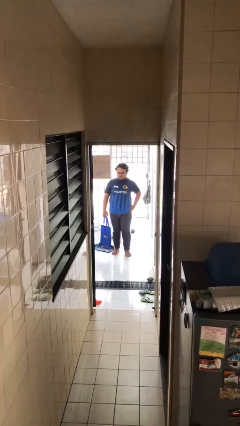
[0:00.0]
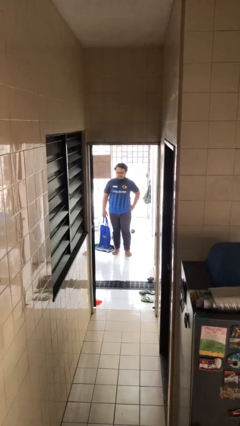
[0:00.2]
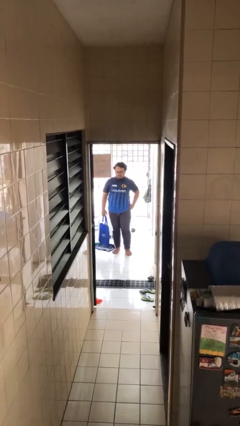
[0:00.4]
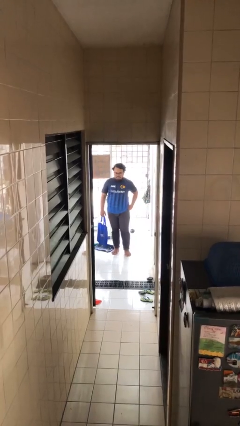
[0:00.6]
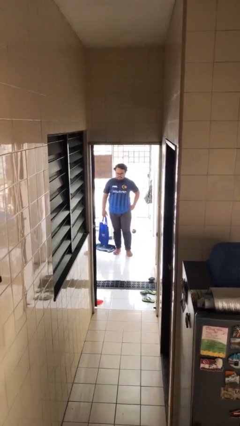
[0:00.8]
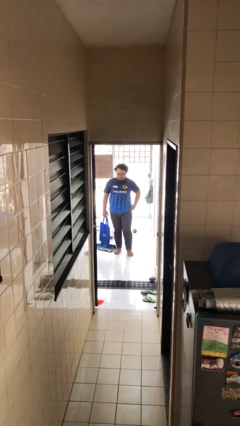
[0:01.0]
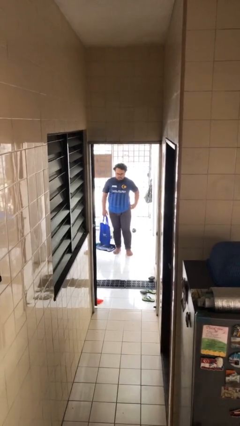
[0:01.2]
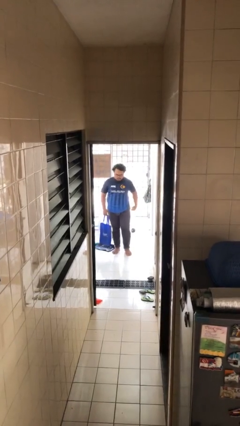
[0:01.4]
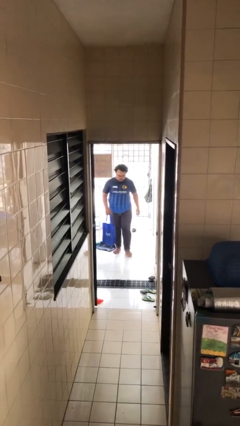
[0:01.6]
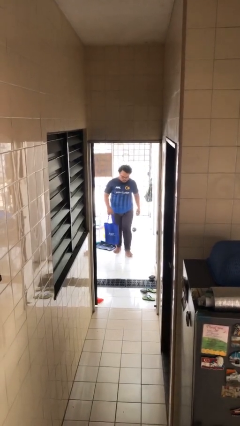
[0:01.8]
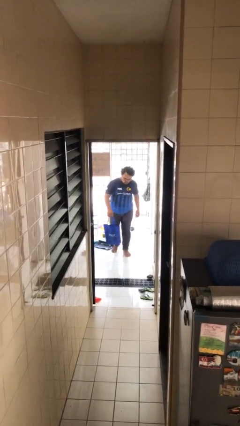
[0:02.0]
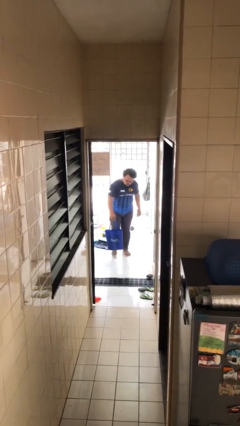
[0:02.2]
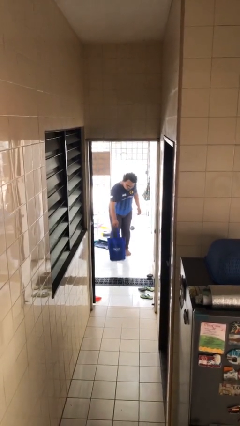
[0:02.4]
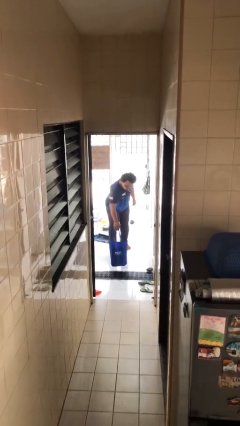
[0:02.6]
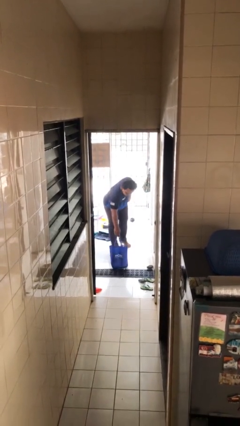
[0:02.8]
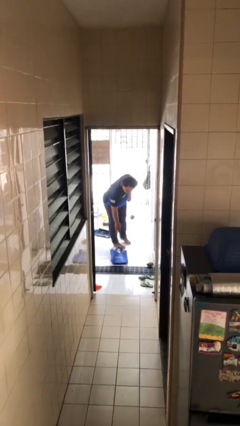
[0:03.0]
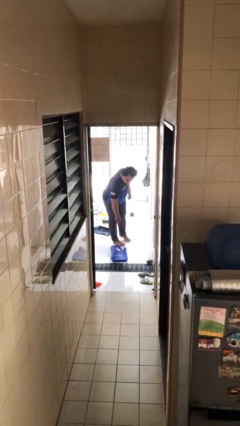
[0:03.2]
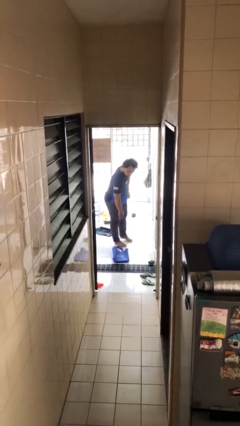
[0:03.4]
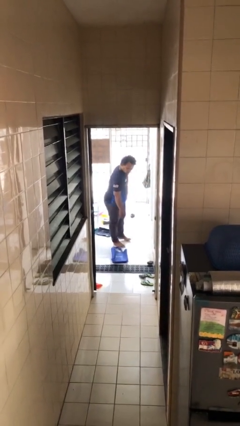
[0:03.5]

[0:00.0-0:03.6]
person puts down object on floor

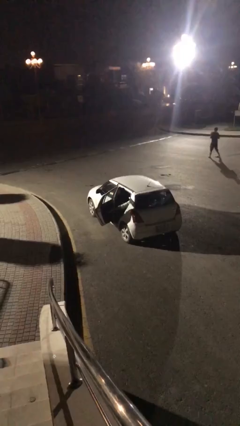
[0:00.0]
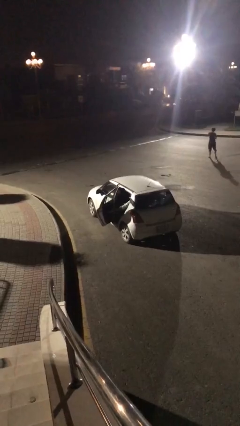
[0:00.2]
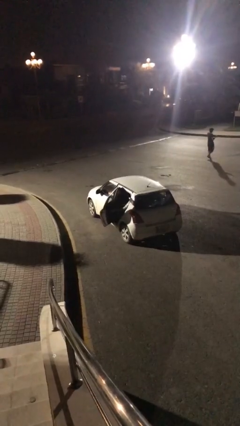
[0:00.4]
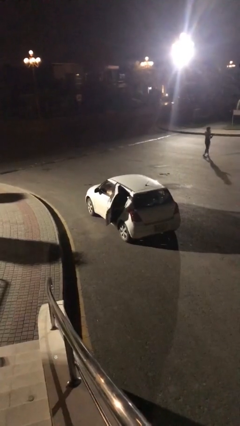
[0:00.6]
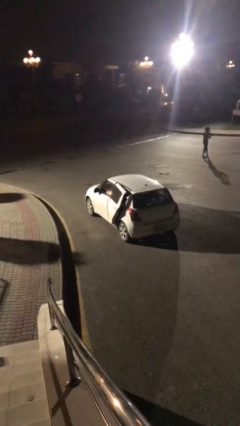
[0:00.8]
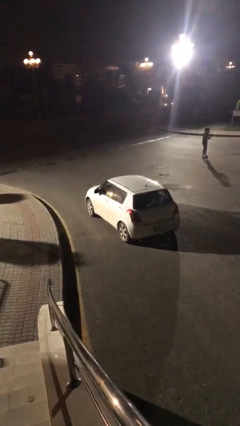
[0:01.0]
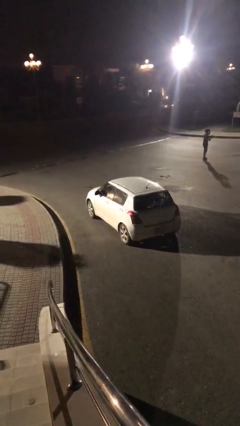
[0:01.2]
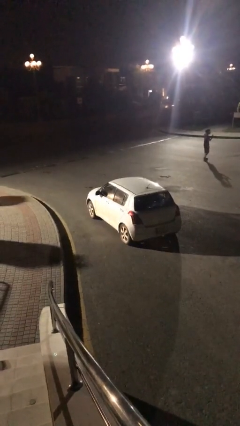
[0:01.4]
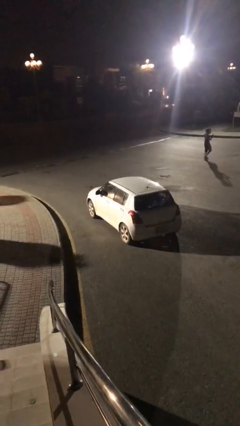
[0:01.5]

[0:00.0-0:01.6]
person closes car door

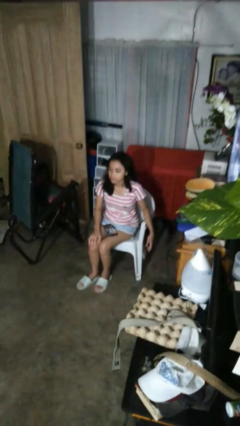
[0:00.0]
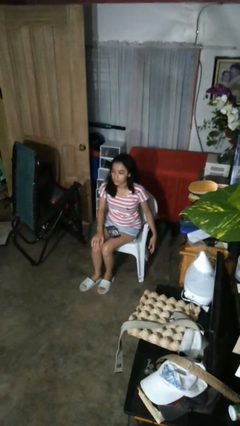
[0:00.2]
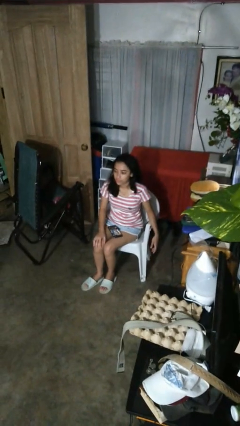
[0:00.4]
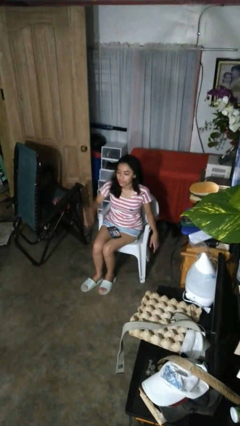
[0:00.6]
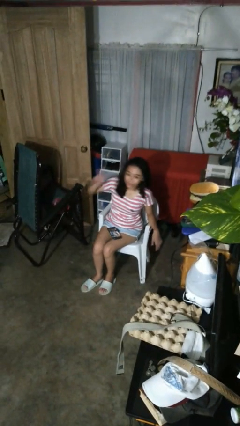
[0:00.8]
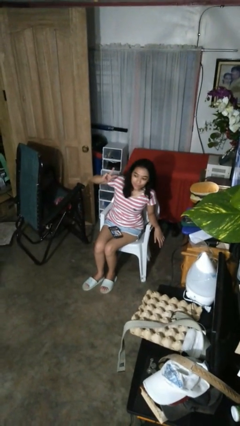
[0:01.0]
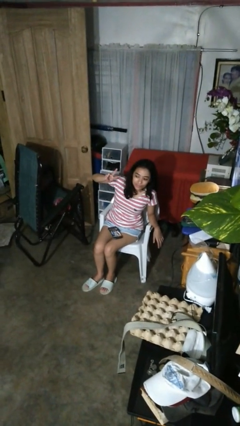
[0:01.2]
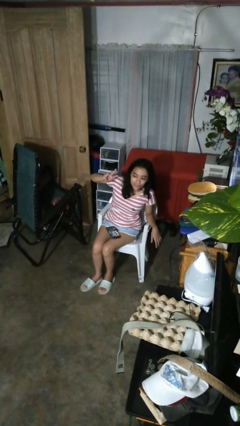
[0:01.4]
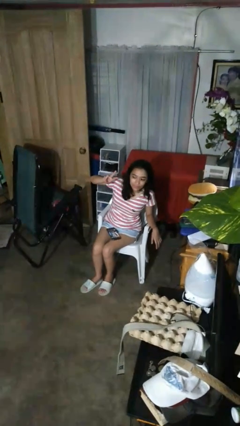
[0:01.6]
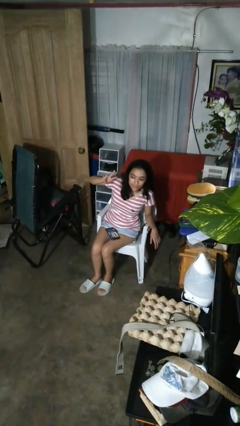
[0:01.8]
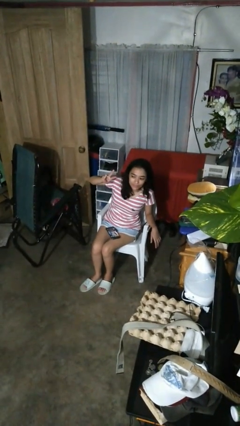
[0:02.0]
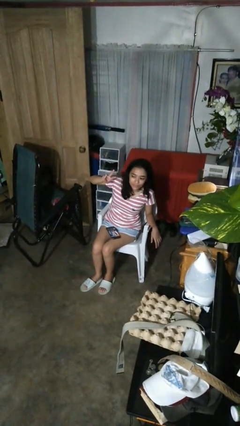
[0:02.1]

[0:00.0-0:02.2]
person gestures peace

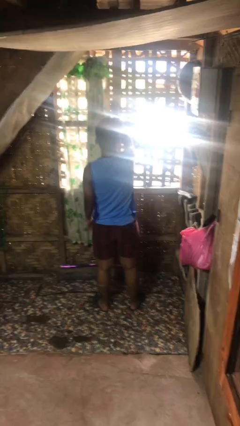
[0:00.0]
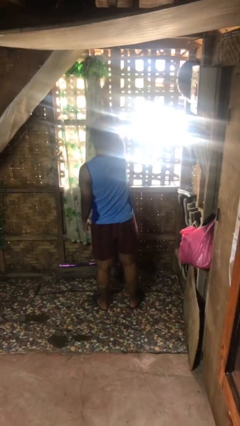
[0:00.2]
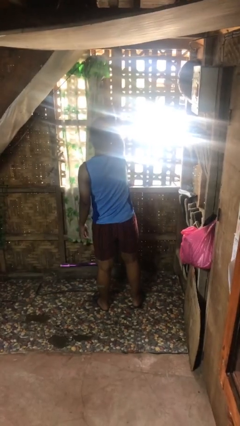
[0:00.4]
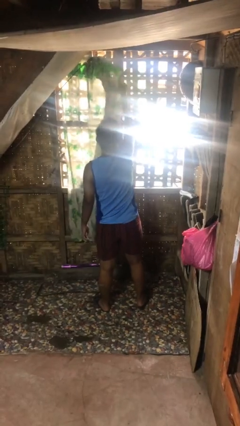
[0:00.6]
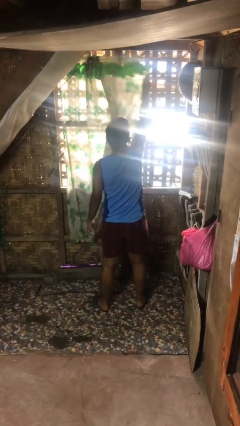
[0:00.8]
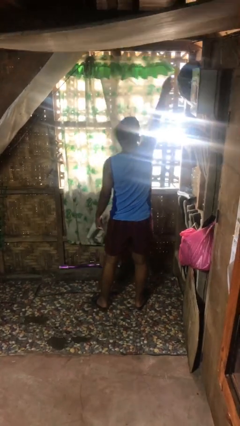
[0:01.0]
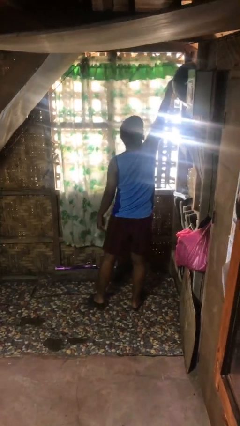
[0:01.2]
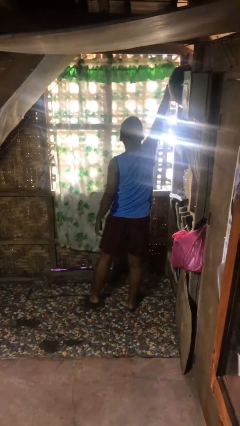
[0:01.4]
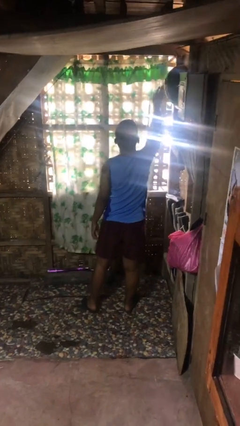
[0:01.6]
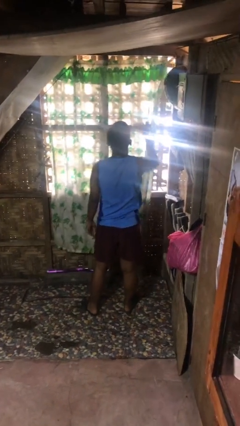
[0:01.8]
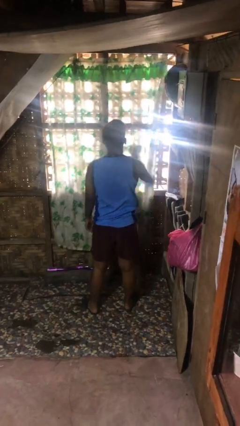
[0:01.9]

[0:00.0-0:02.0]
person closes curtains

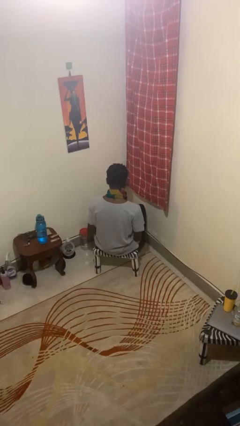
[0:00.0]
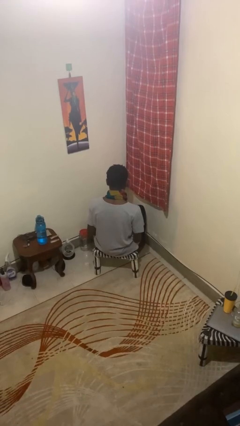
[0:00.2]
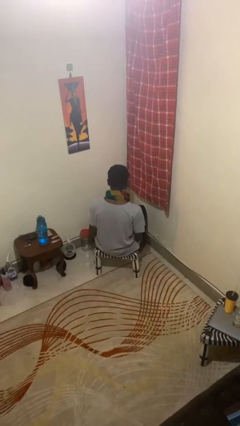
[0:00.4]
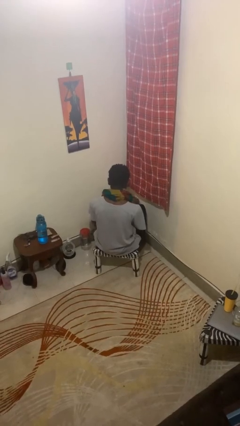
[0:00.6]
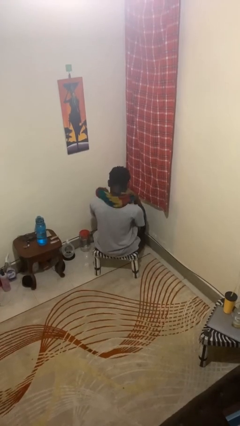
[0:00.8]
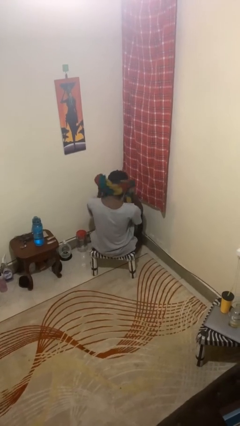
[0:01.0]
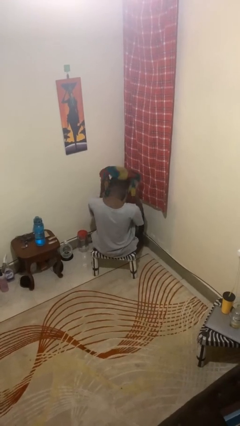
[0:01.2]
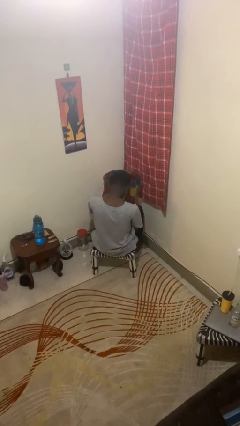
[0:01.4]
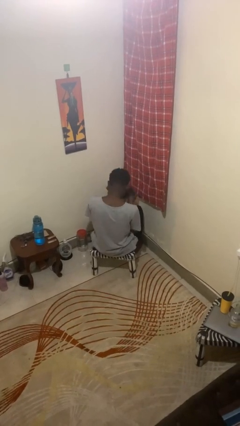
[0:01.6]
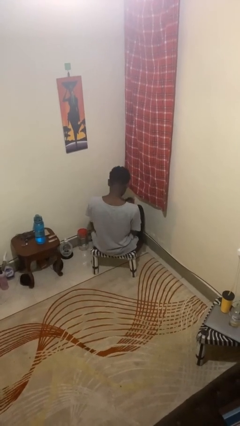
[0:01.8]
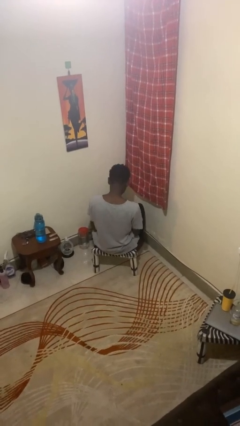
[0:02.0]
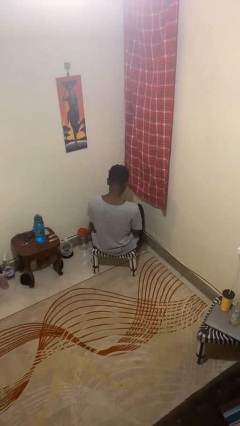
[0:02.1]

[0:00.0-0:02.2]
person takes off scarf

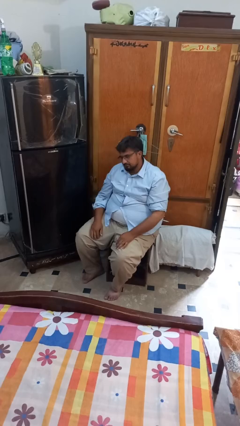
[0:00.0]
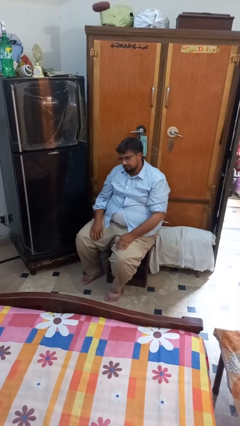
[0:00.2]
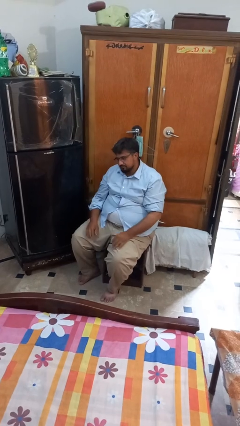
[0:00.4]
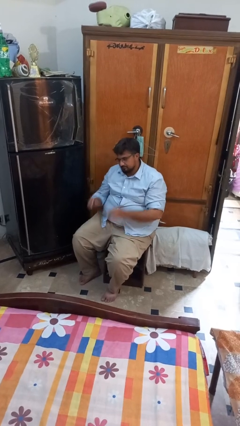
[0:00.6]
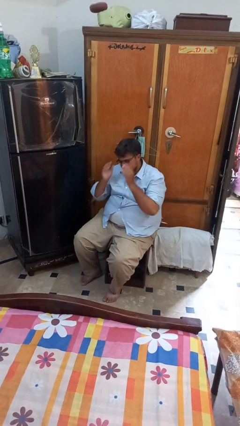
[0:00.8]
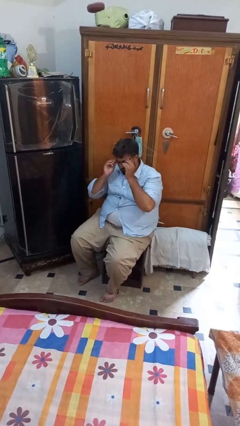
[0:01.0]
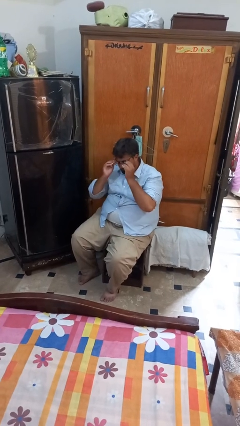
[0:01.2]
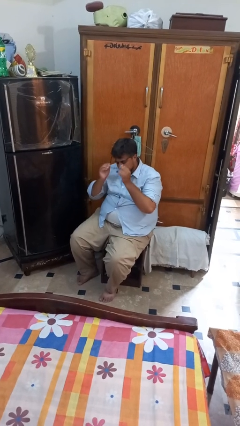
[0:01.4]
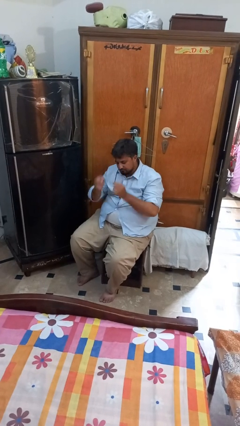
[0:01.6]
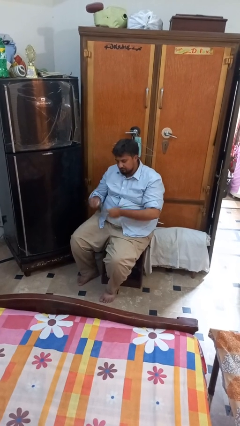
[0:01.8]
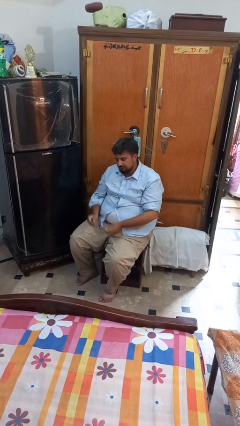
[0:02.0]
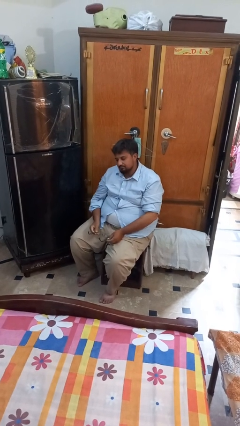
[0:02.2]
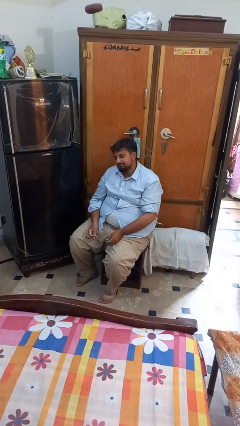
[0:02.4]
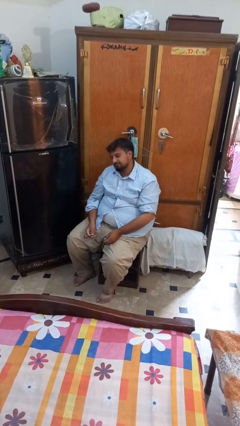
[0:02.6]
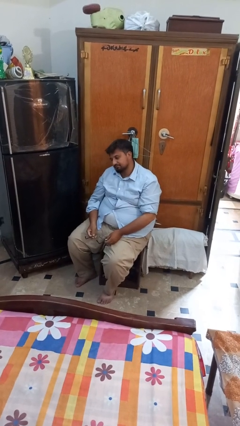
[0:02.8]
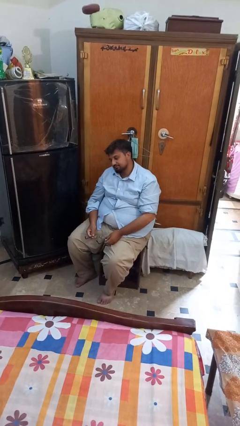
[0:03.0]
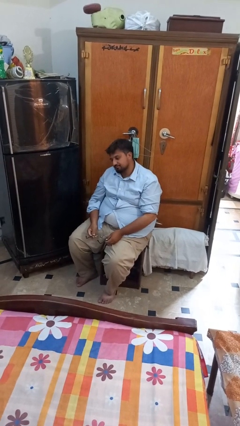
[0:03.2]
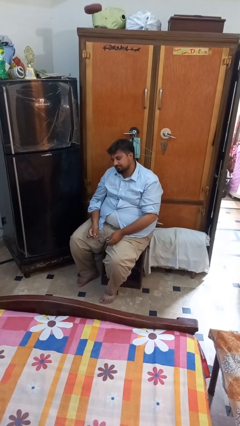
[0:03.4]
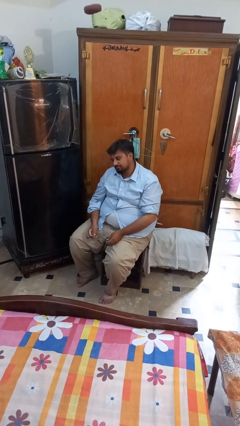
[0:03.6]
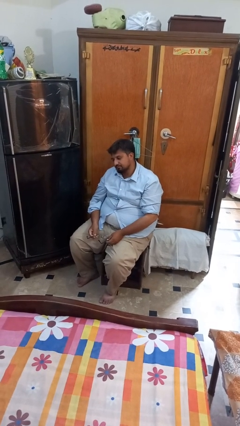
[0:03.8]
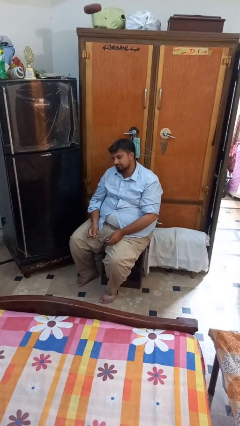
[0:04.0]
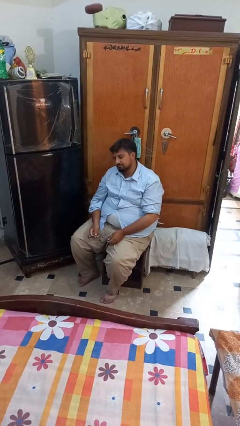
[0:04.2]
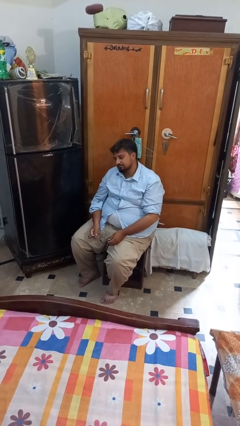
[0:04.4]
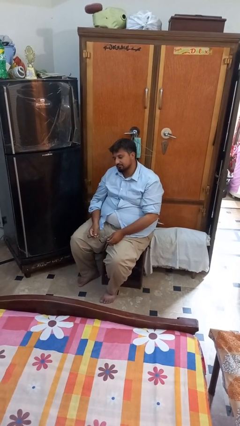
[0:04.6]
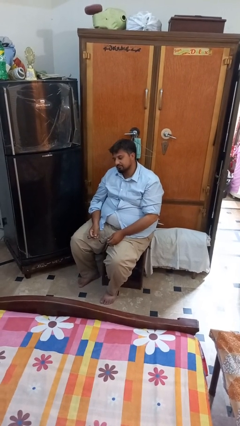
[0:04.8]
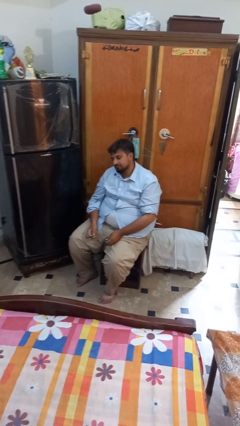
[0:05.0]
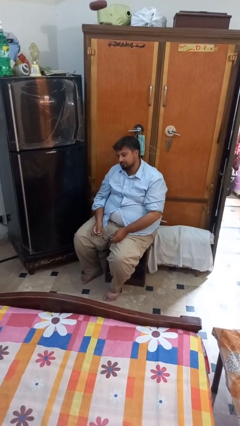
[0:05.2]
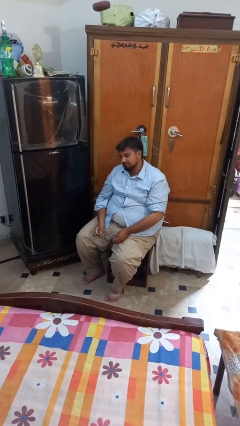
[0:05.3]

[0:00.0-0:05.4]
person takes off glasses

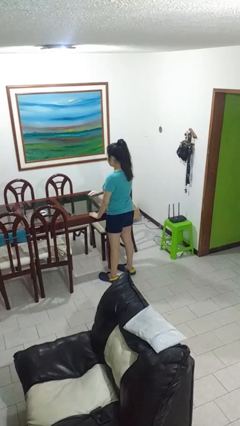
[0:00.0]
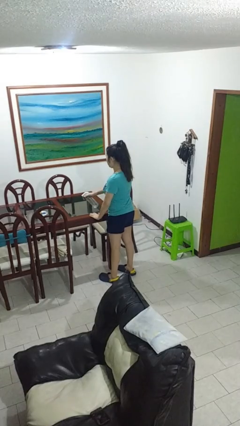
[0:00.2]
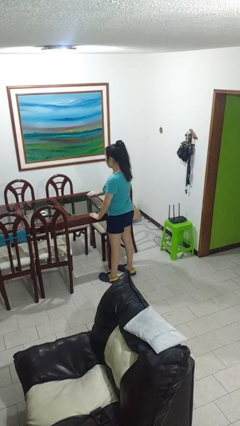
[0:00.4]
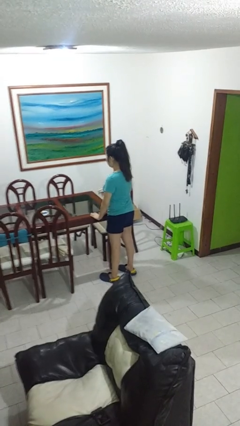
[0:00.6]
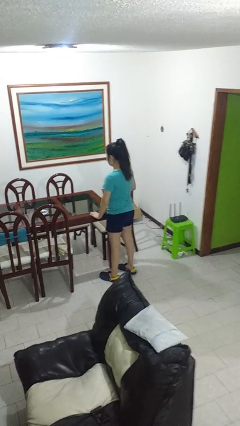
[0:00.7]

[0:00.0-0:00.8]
person sprays from bottle
